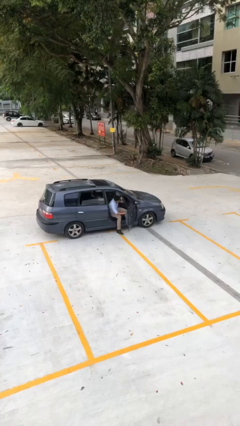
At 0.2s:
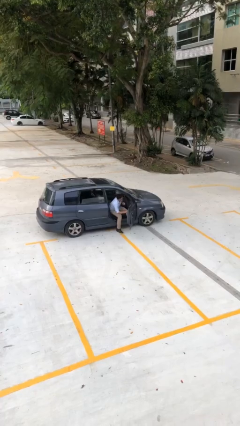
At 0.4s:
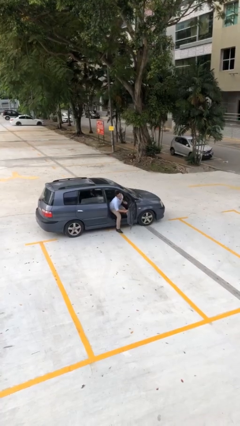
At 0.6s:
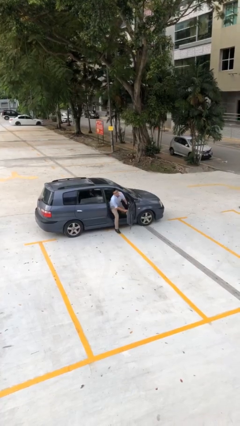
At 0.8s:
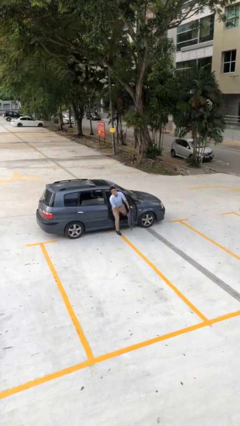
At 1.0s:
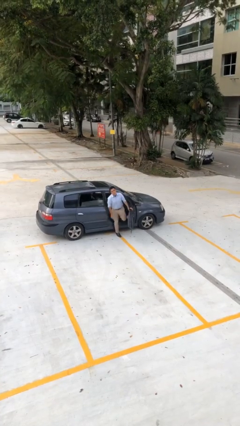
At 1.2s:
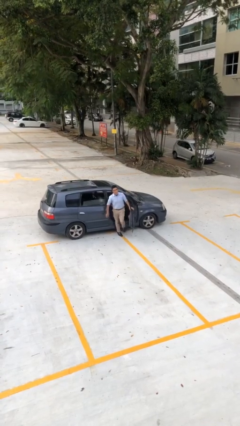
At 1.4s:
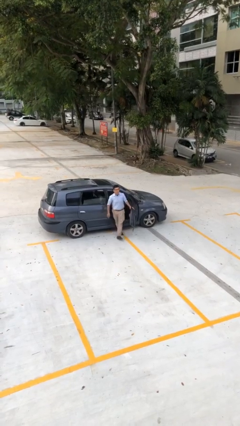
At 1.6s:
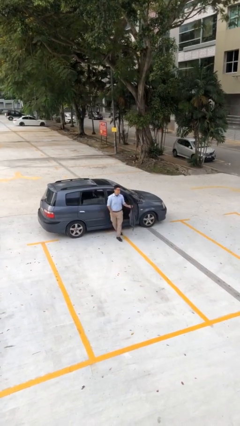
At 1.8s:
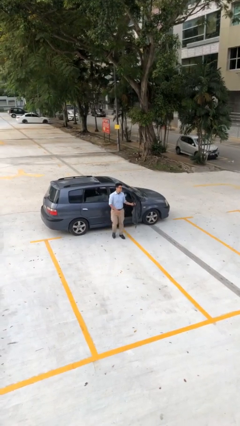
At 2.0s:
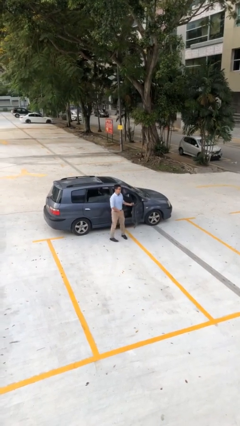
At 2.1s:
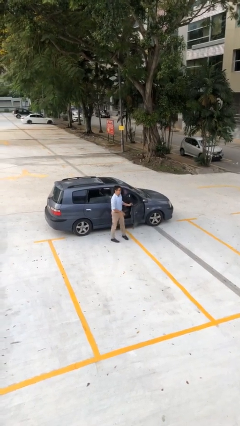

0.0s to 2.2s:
person exits car

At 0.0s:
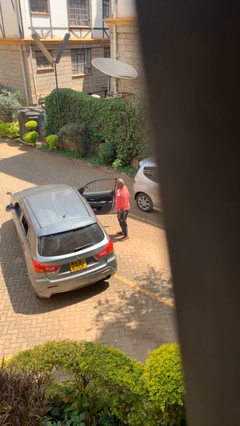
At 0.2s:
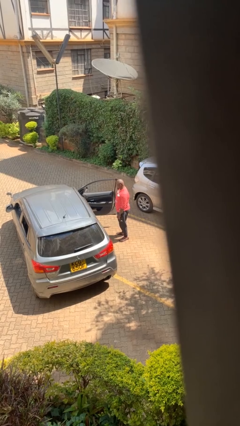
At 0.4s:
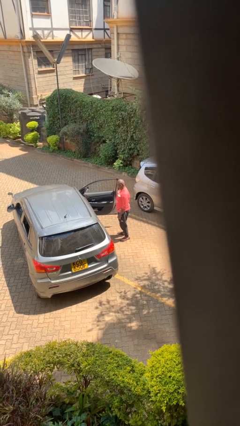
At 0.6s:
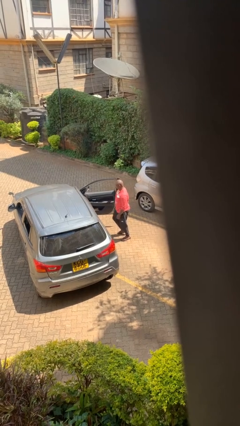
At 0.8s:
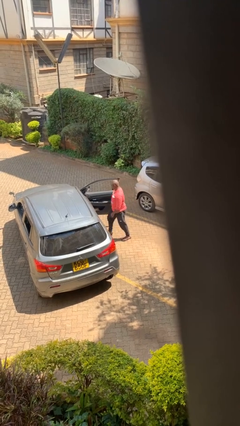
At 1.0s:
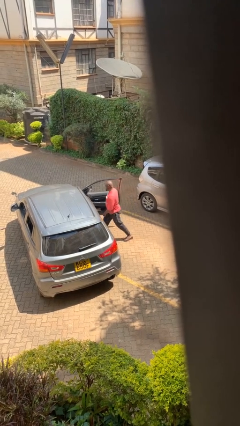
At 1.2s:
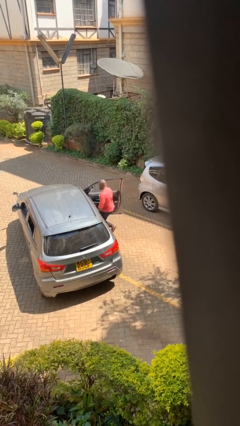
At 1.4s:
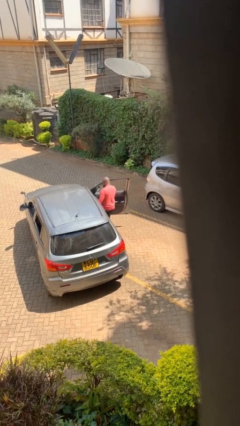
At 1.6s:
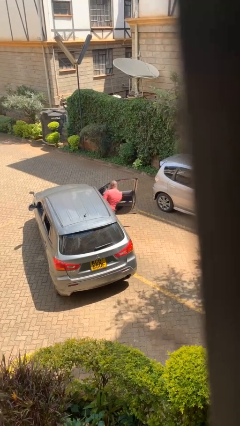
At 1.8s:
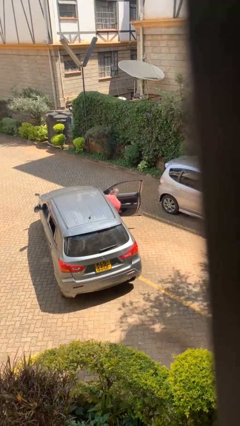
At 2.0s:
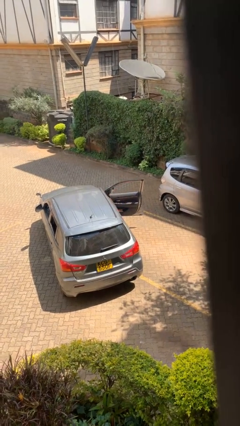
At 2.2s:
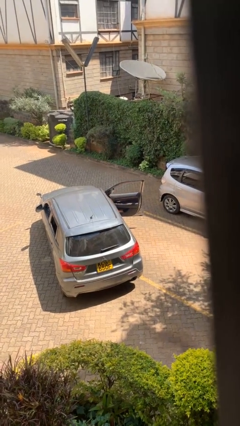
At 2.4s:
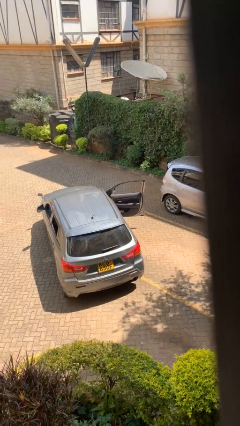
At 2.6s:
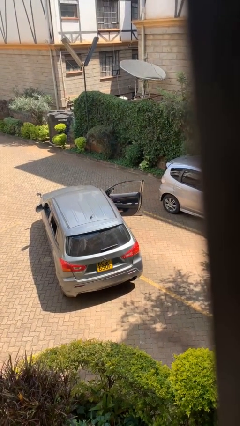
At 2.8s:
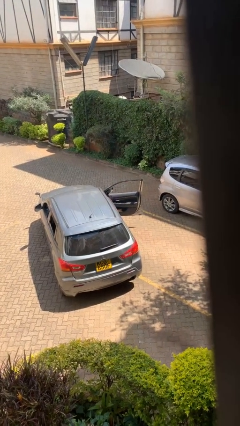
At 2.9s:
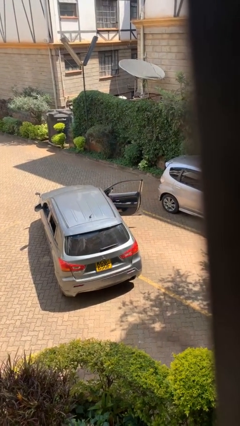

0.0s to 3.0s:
person enters car

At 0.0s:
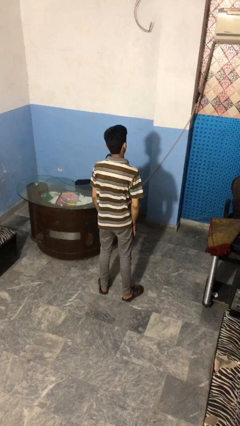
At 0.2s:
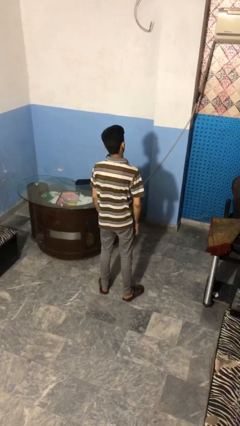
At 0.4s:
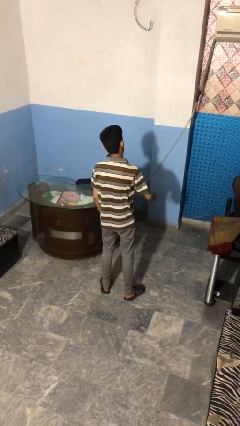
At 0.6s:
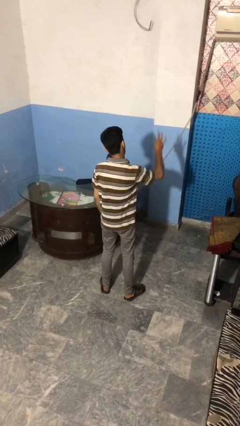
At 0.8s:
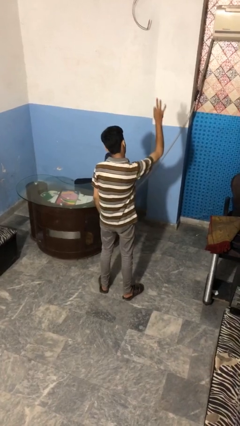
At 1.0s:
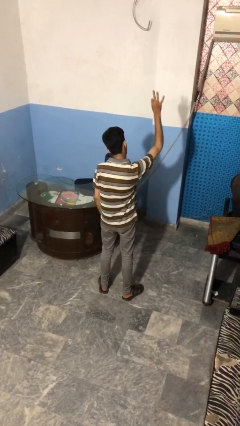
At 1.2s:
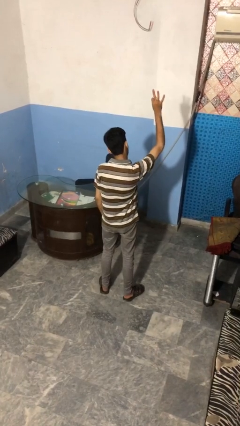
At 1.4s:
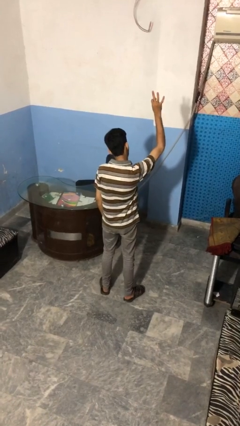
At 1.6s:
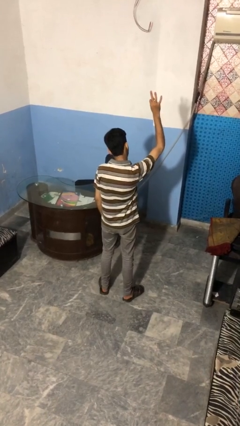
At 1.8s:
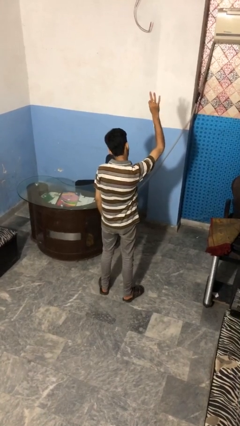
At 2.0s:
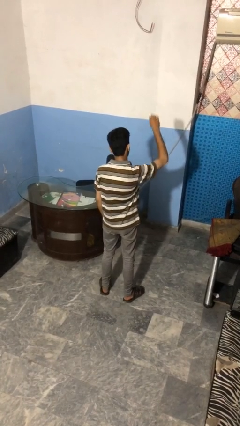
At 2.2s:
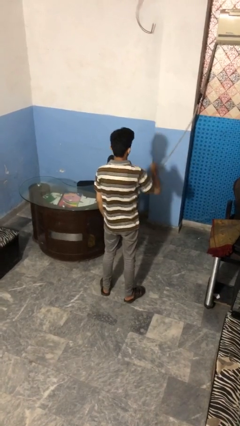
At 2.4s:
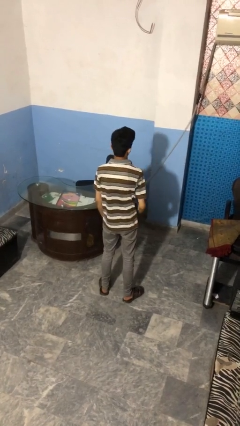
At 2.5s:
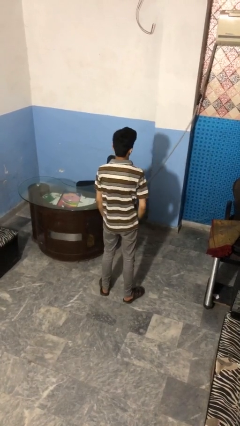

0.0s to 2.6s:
person gestures number three

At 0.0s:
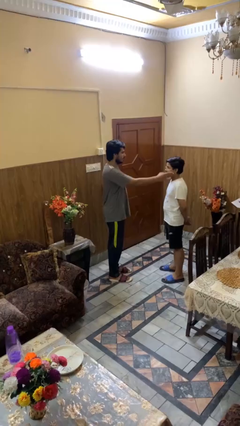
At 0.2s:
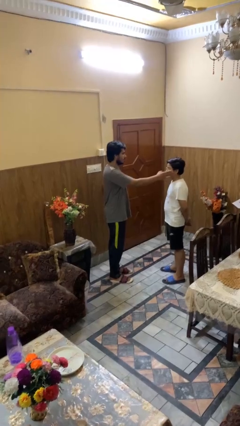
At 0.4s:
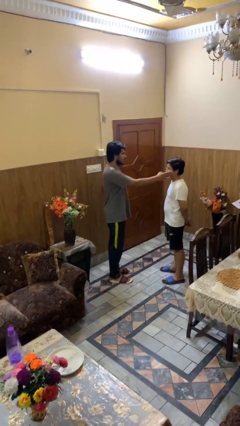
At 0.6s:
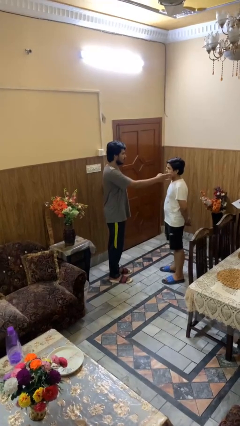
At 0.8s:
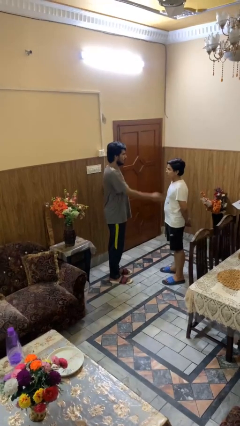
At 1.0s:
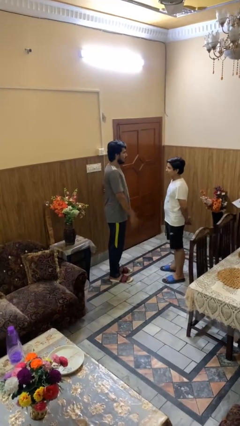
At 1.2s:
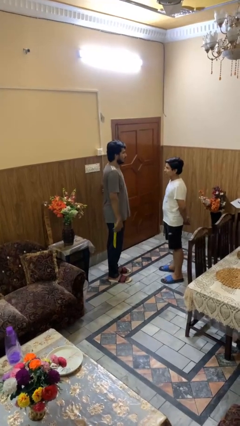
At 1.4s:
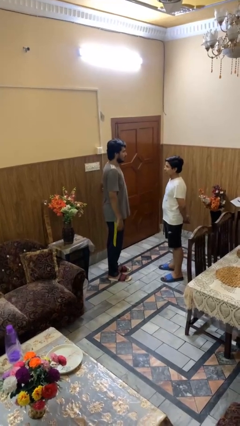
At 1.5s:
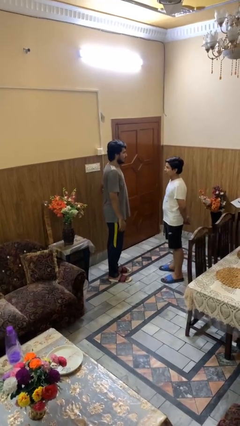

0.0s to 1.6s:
person touches face of person

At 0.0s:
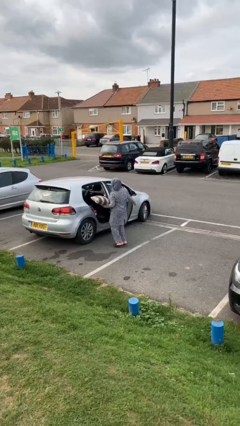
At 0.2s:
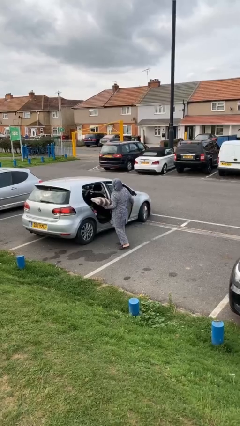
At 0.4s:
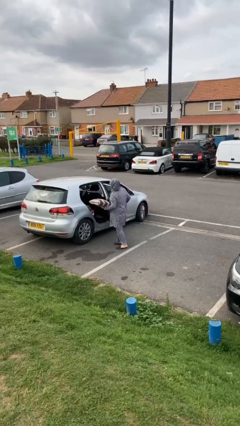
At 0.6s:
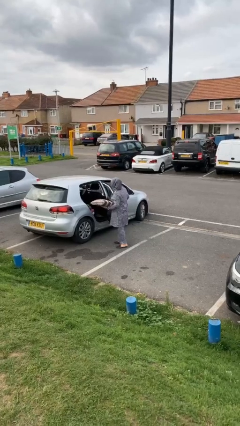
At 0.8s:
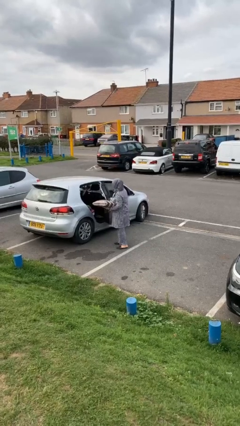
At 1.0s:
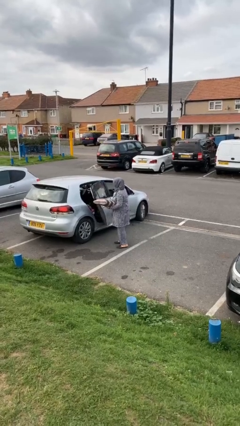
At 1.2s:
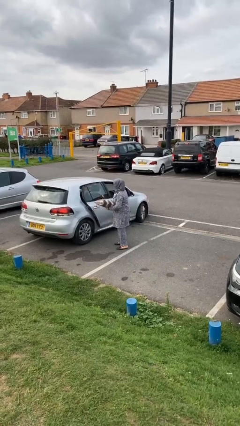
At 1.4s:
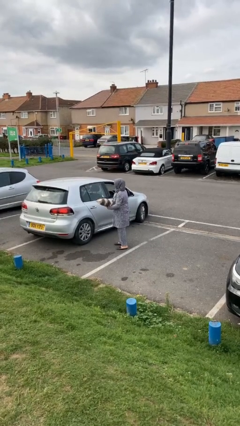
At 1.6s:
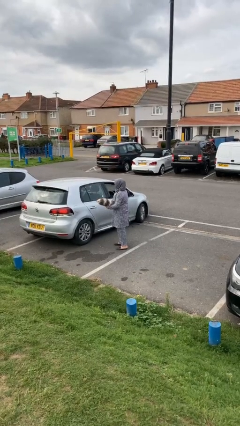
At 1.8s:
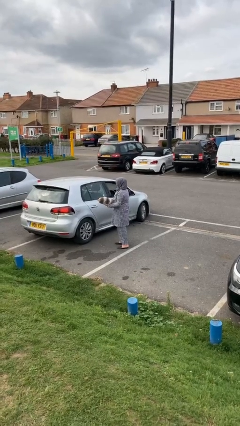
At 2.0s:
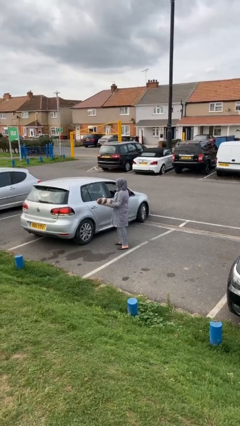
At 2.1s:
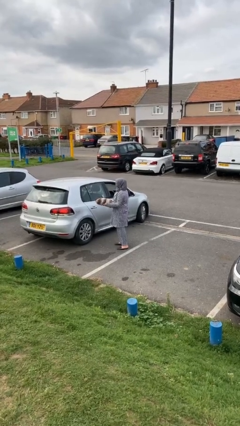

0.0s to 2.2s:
person closes car door

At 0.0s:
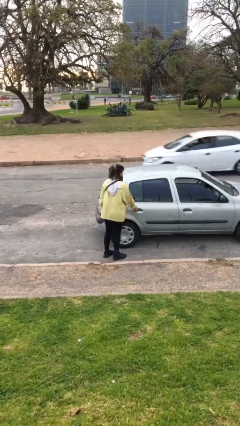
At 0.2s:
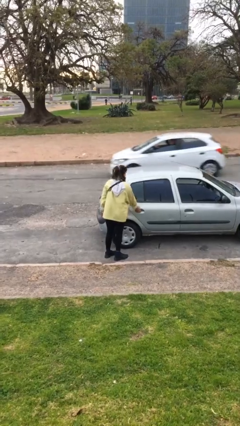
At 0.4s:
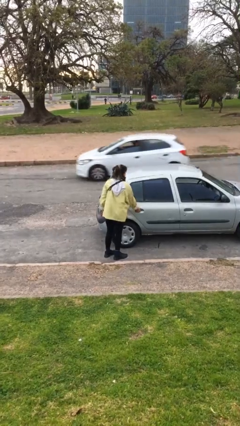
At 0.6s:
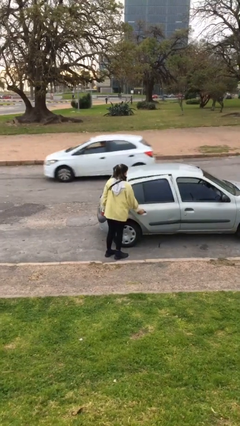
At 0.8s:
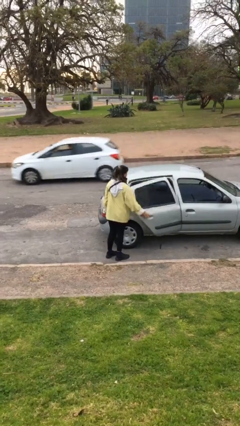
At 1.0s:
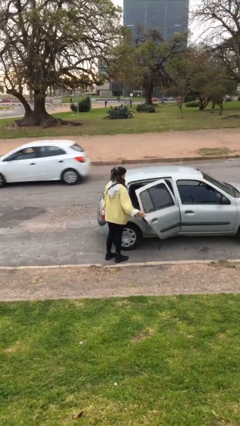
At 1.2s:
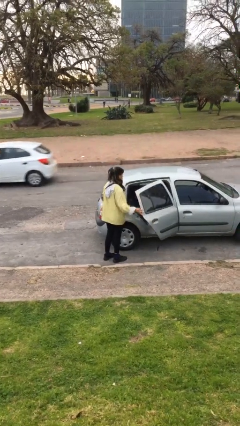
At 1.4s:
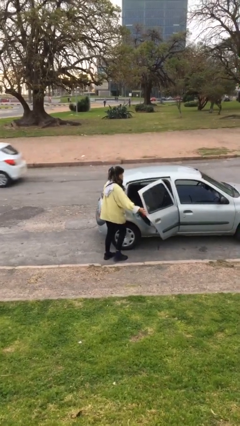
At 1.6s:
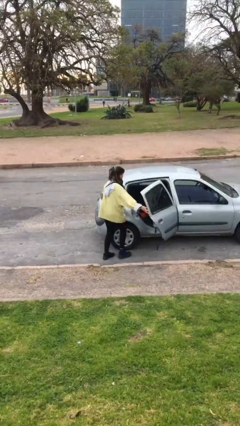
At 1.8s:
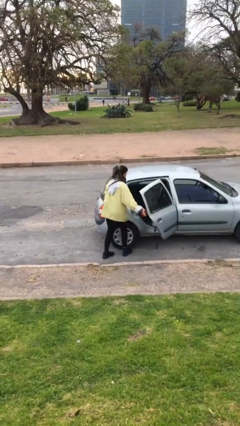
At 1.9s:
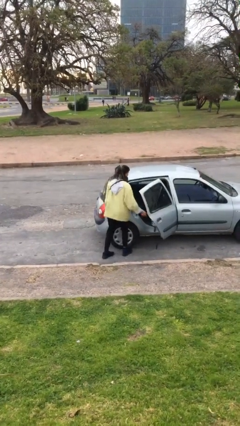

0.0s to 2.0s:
person opens car door

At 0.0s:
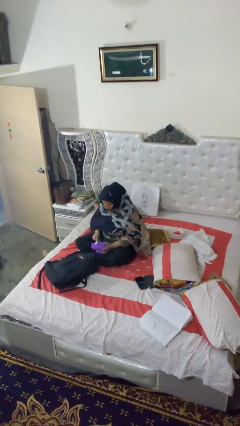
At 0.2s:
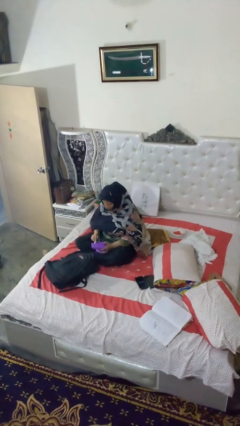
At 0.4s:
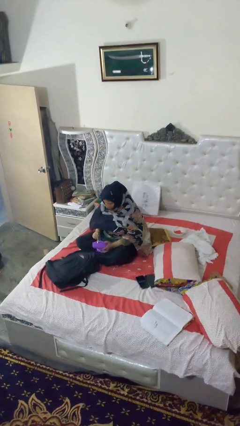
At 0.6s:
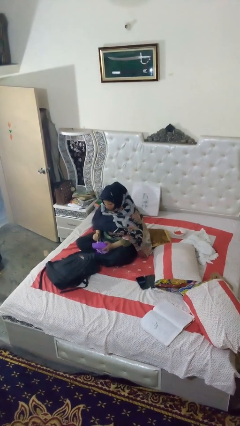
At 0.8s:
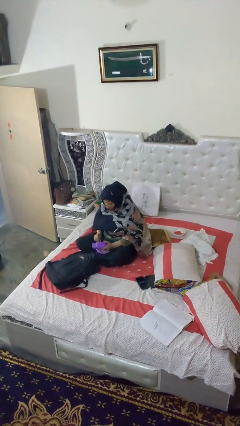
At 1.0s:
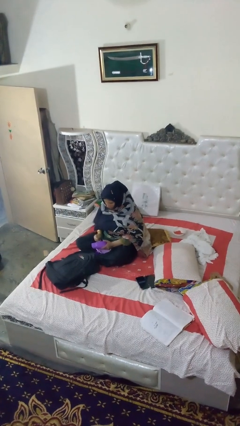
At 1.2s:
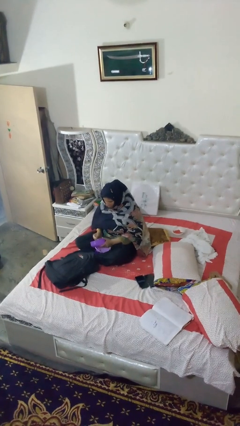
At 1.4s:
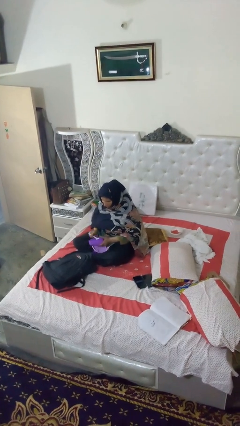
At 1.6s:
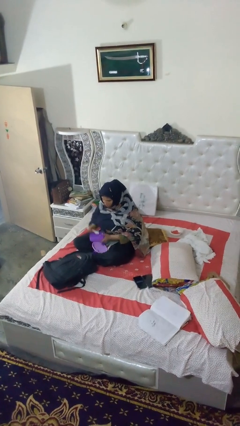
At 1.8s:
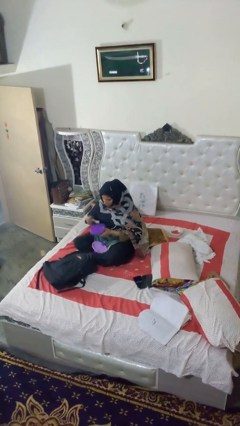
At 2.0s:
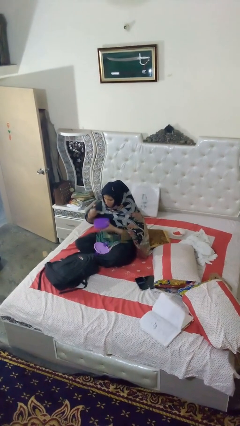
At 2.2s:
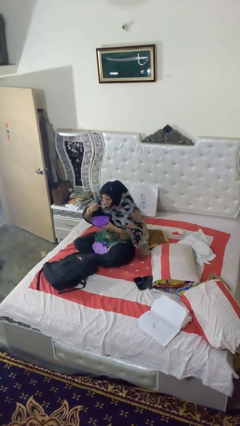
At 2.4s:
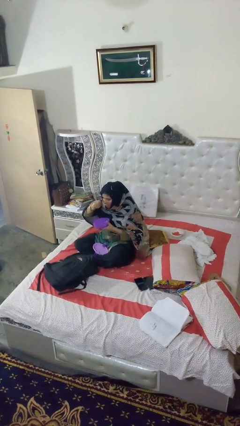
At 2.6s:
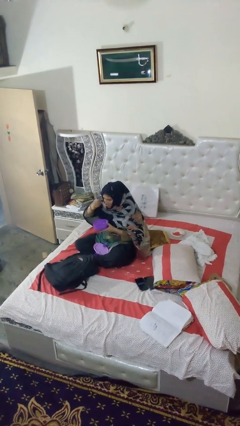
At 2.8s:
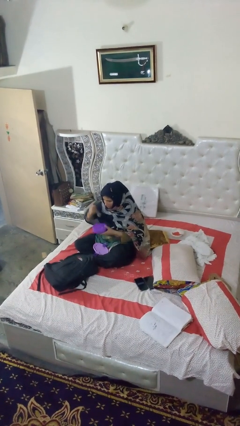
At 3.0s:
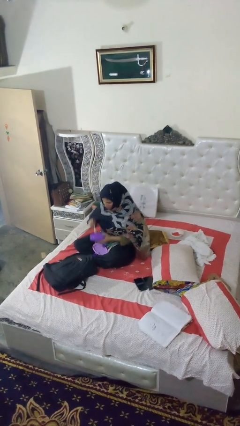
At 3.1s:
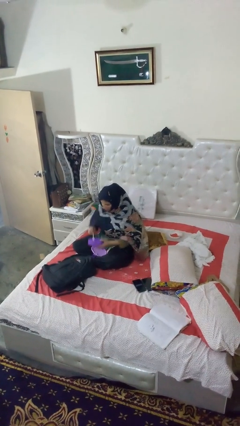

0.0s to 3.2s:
person eats snack from bag

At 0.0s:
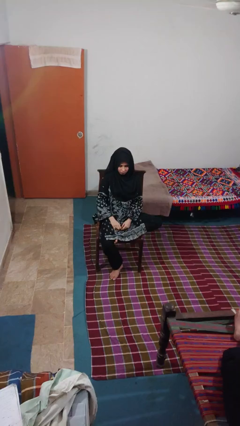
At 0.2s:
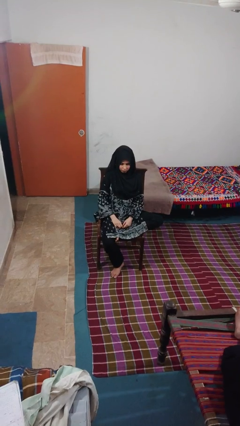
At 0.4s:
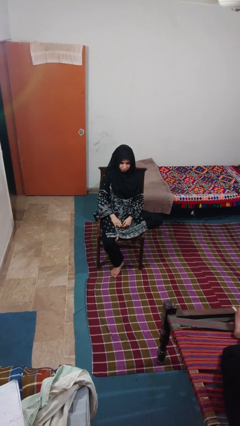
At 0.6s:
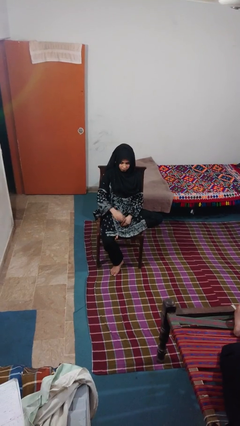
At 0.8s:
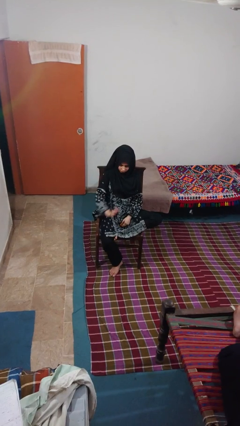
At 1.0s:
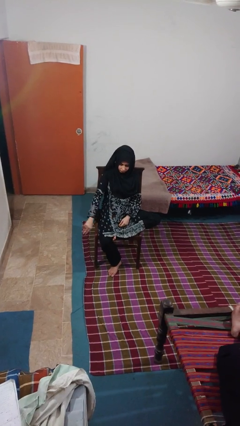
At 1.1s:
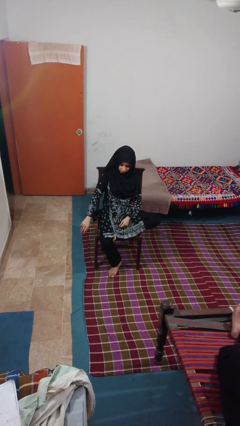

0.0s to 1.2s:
person swats bug
